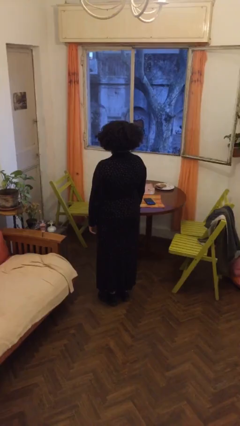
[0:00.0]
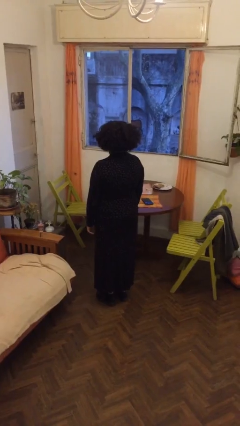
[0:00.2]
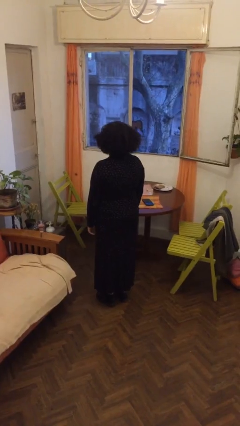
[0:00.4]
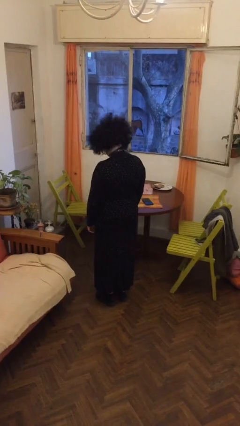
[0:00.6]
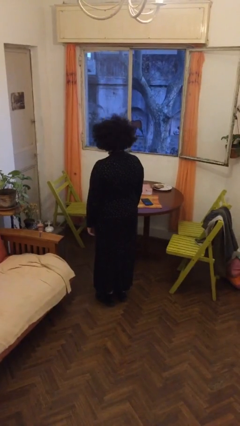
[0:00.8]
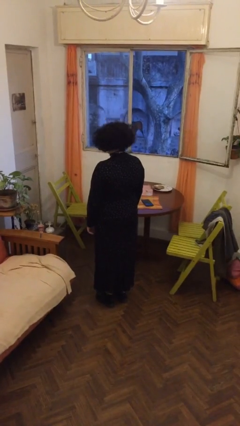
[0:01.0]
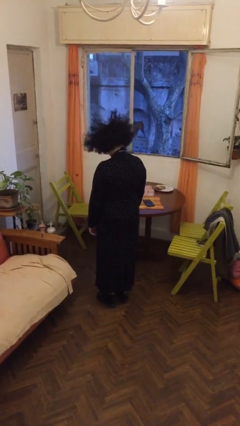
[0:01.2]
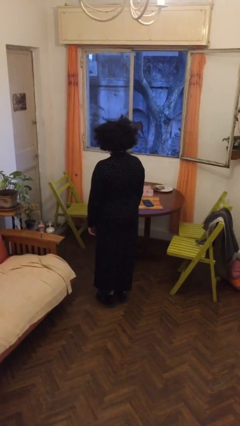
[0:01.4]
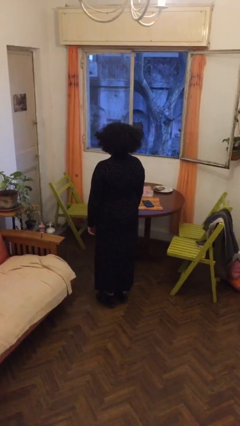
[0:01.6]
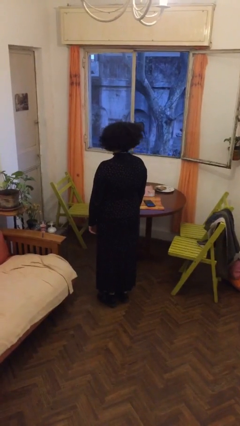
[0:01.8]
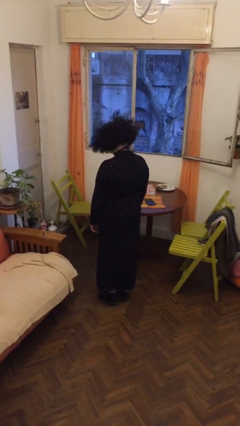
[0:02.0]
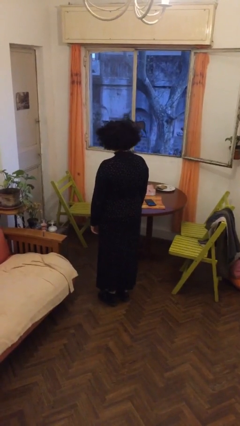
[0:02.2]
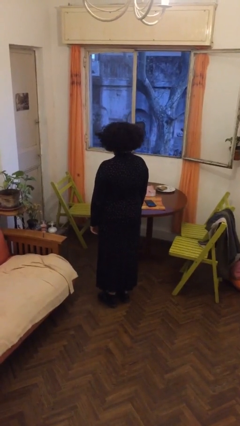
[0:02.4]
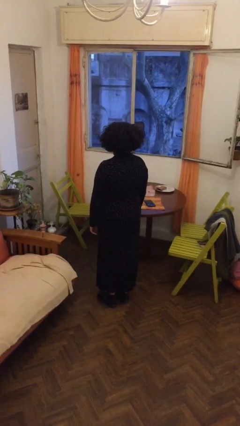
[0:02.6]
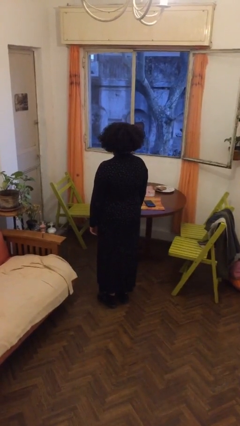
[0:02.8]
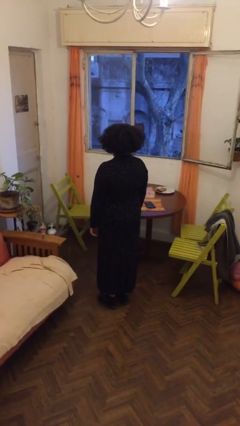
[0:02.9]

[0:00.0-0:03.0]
person nods head

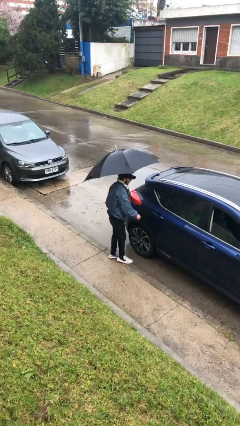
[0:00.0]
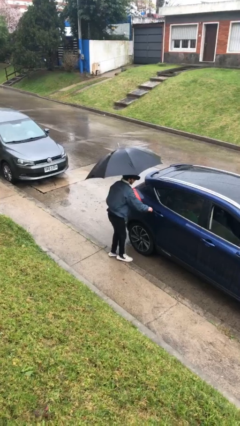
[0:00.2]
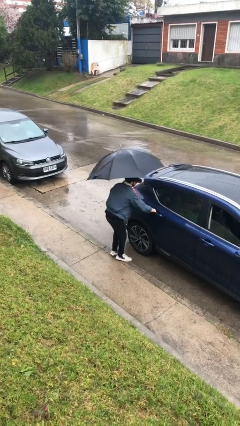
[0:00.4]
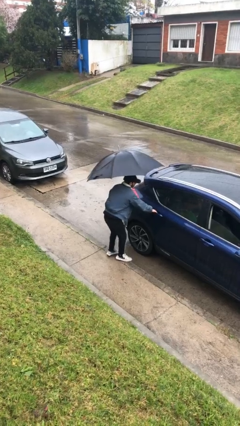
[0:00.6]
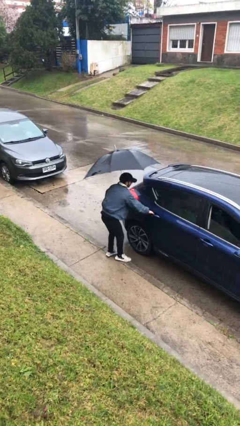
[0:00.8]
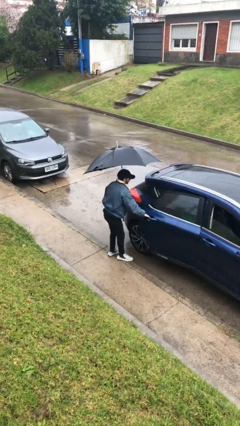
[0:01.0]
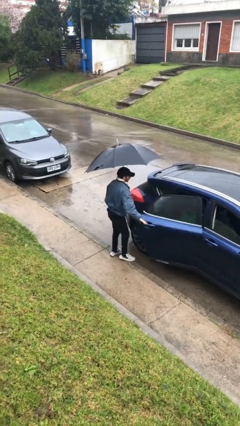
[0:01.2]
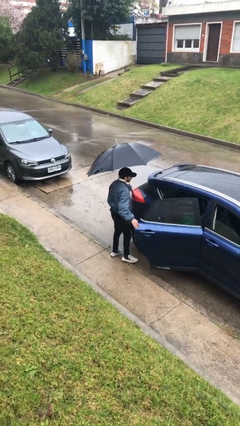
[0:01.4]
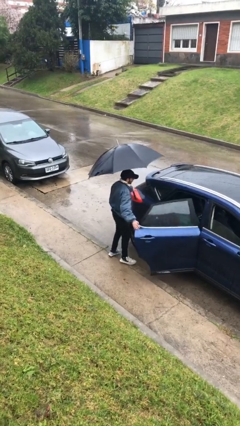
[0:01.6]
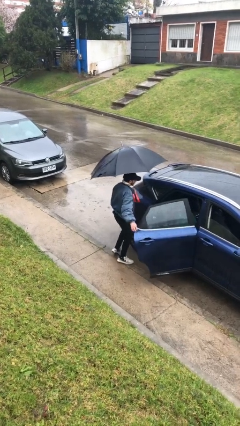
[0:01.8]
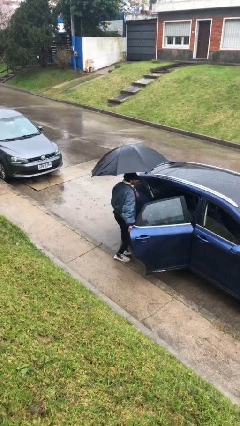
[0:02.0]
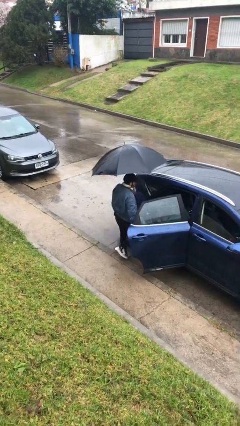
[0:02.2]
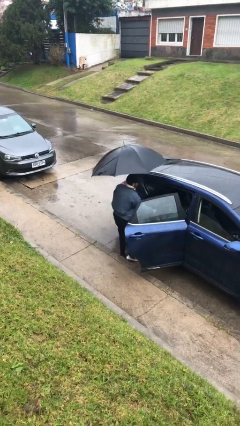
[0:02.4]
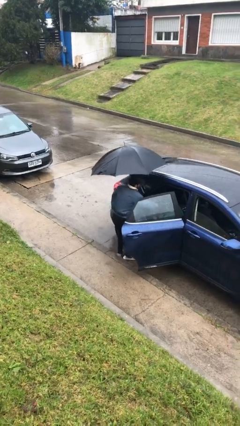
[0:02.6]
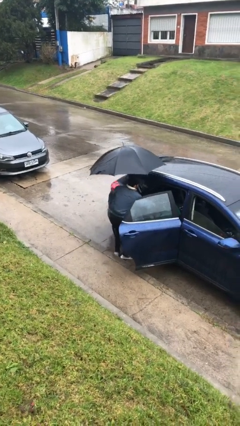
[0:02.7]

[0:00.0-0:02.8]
person opens car door

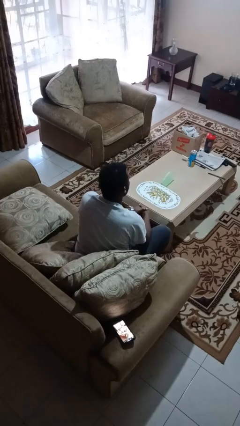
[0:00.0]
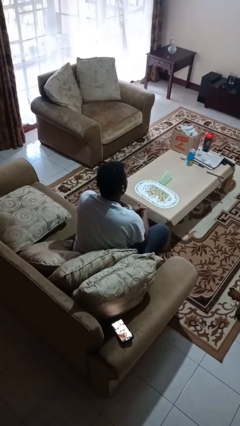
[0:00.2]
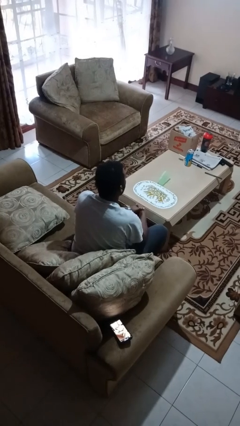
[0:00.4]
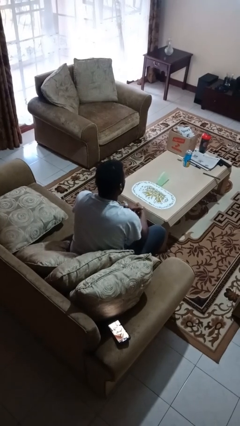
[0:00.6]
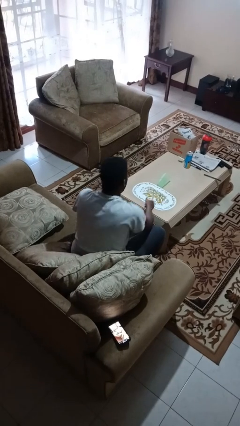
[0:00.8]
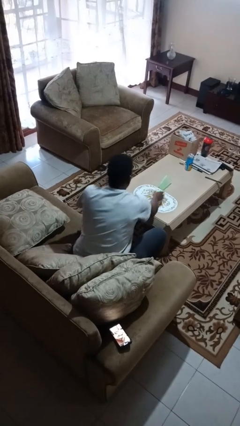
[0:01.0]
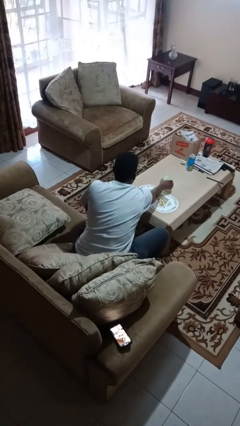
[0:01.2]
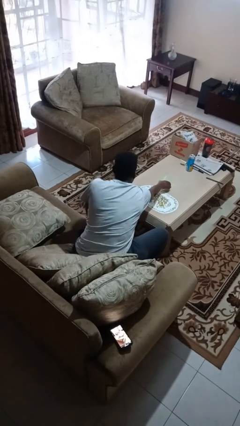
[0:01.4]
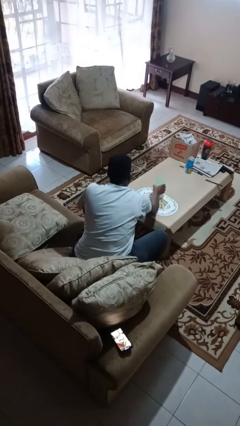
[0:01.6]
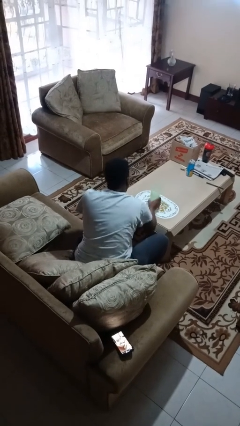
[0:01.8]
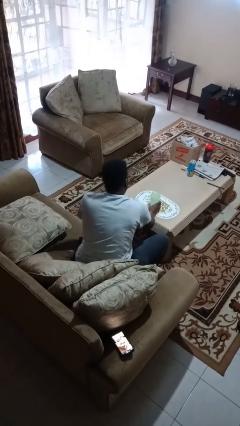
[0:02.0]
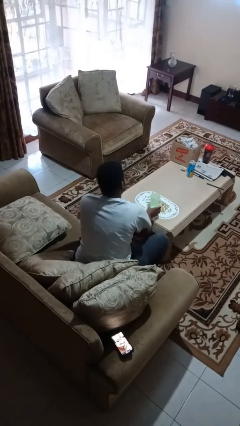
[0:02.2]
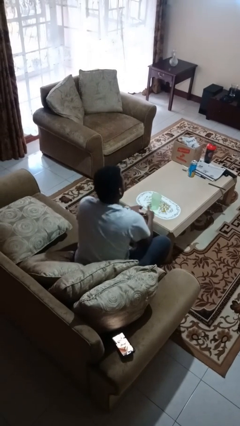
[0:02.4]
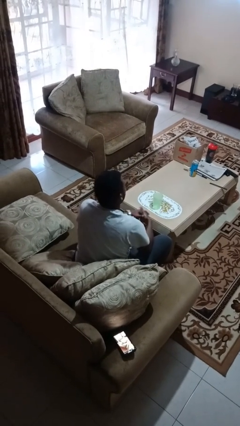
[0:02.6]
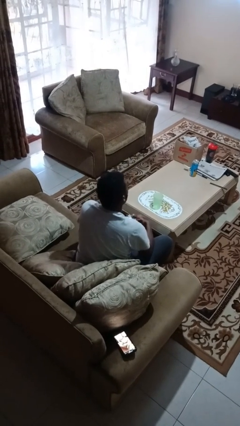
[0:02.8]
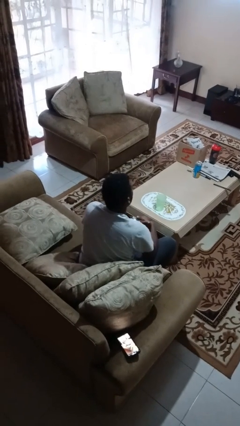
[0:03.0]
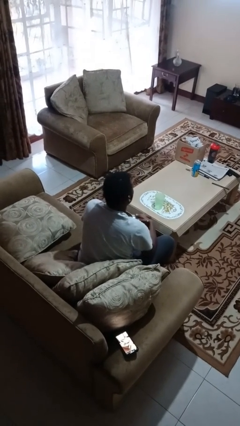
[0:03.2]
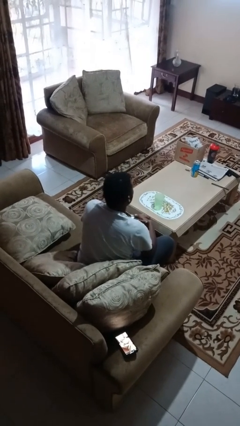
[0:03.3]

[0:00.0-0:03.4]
person sets upright glass

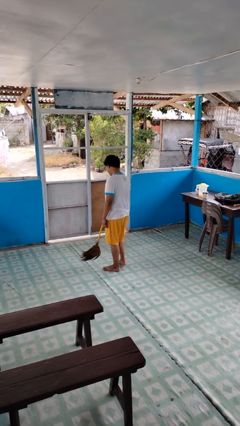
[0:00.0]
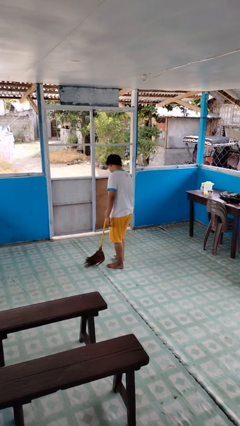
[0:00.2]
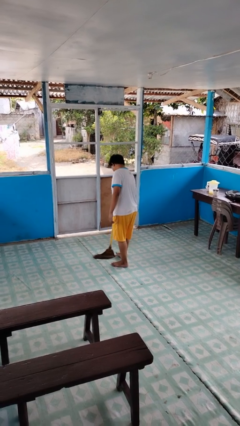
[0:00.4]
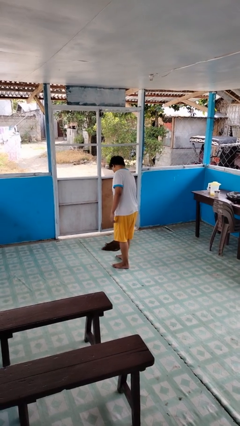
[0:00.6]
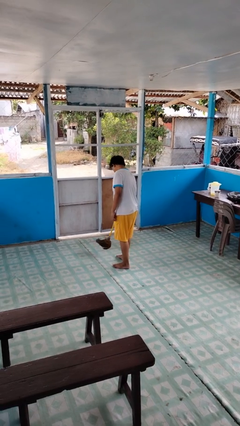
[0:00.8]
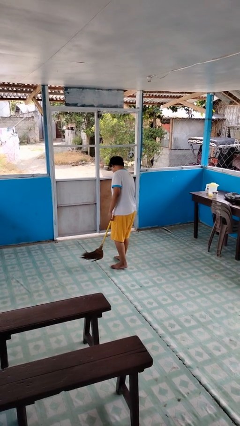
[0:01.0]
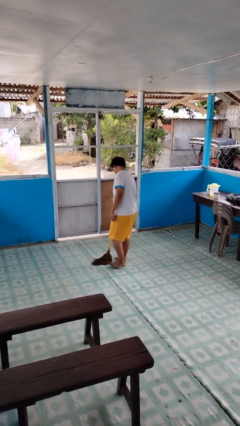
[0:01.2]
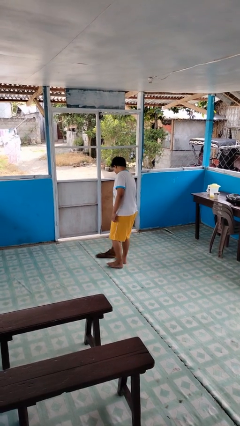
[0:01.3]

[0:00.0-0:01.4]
person sweeps floor

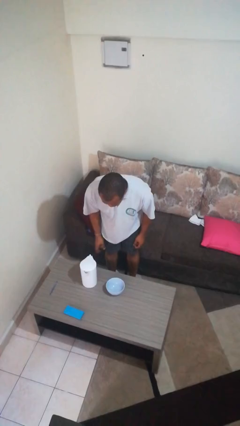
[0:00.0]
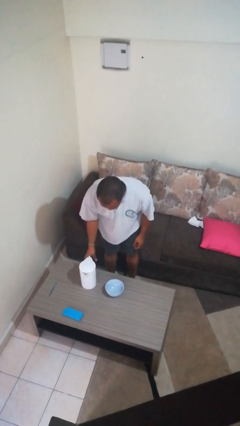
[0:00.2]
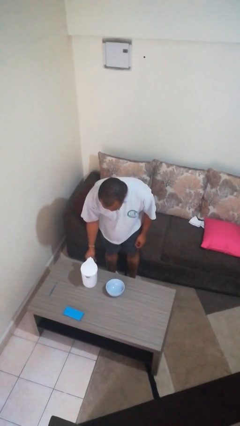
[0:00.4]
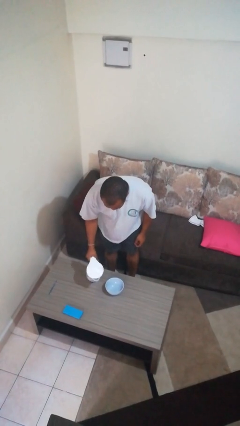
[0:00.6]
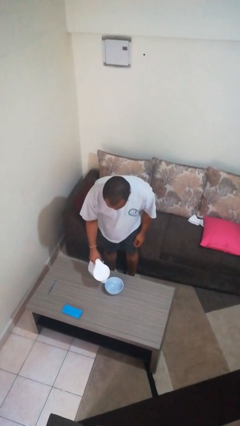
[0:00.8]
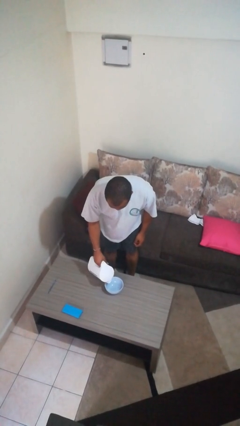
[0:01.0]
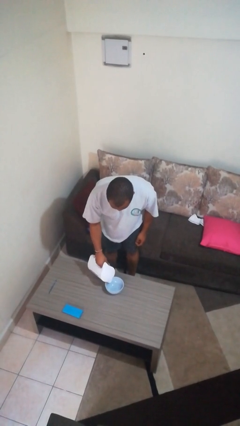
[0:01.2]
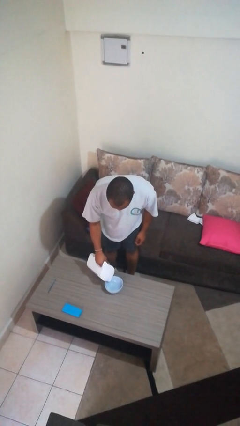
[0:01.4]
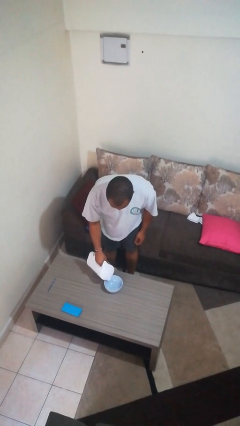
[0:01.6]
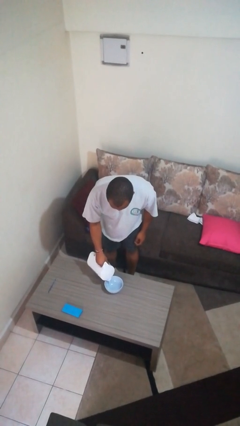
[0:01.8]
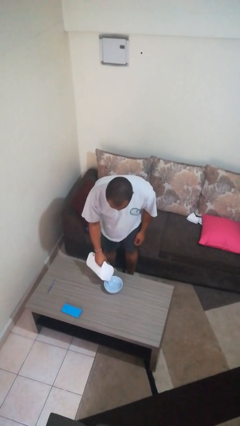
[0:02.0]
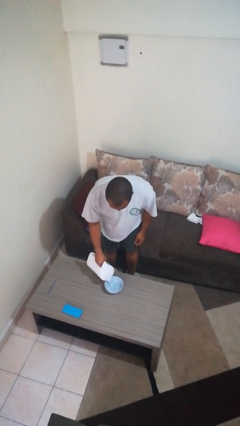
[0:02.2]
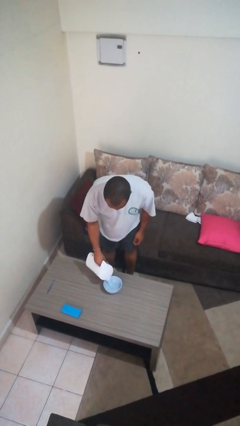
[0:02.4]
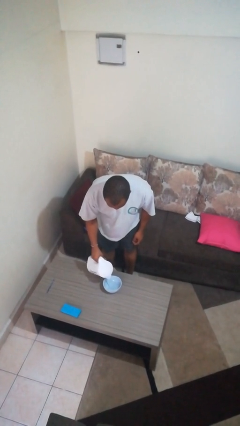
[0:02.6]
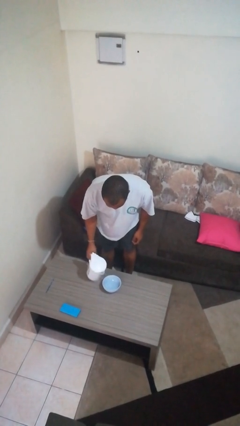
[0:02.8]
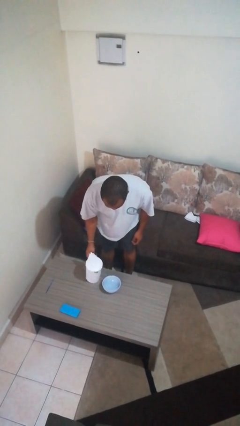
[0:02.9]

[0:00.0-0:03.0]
person pours into bowl

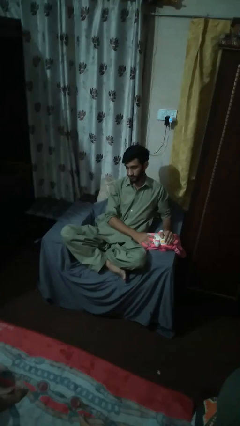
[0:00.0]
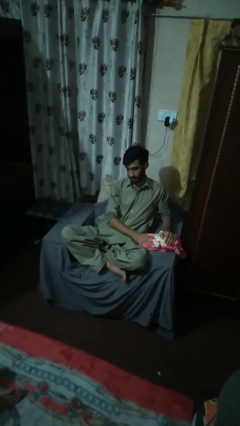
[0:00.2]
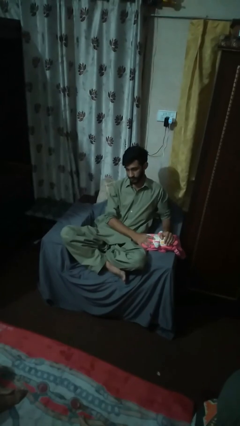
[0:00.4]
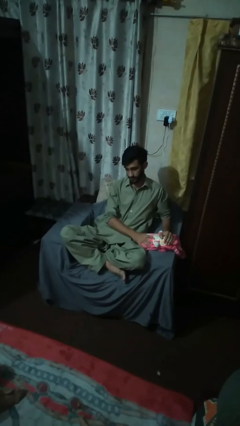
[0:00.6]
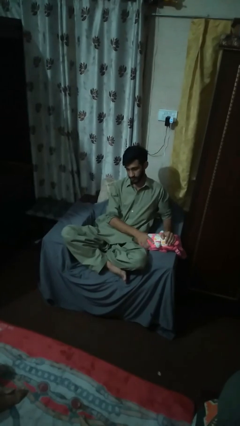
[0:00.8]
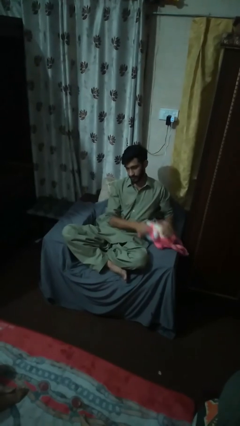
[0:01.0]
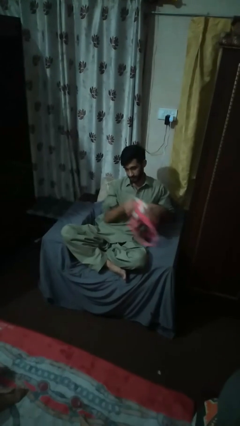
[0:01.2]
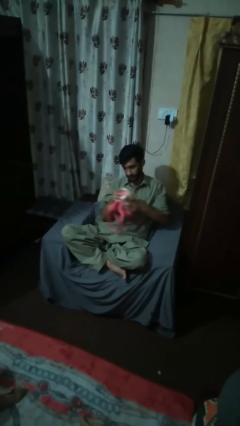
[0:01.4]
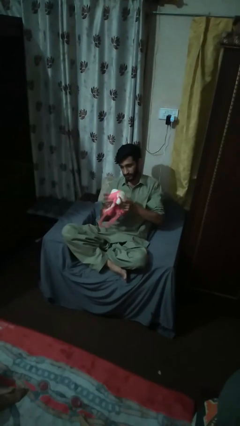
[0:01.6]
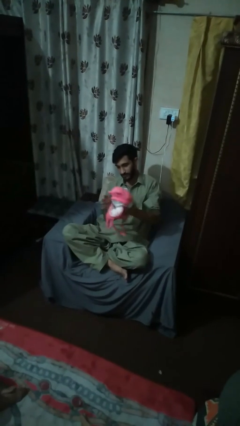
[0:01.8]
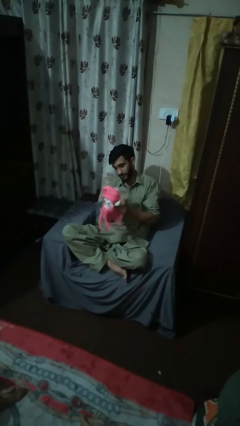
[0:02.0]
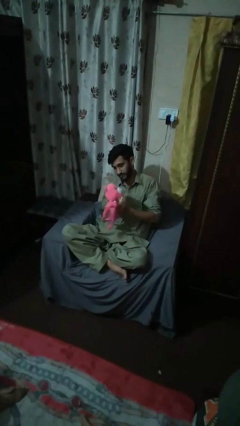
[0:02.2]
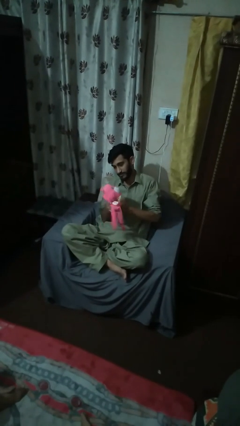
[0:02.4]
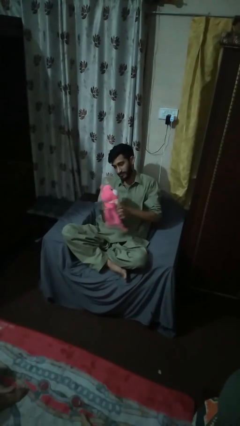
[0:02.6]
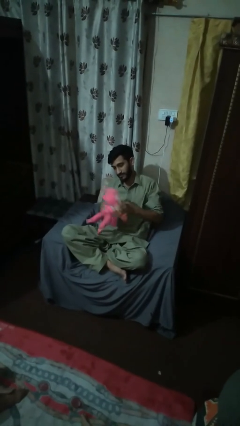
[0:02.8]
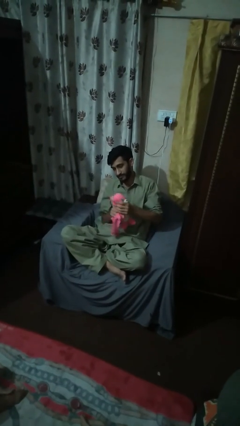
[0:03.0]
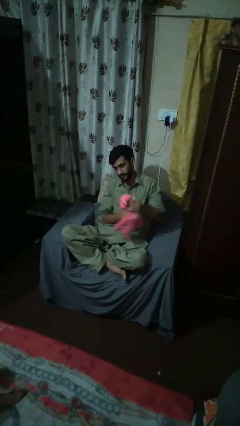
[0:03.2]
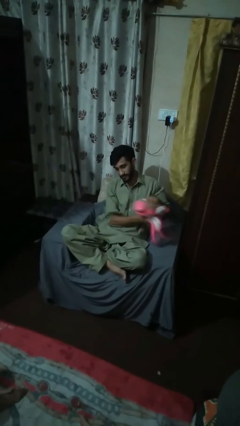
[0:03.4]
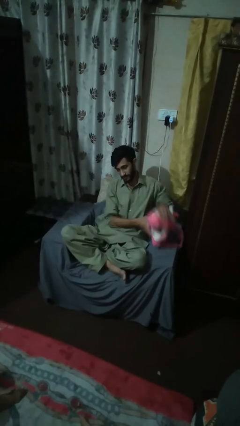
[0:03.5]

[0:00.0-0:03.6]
person squeezes object

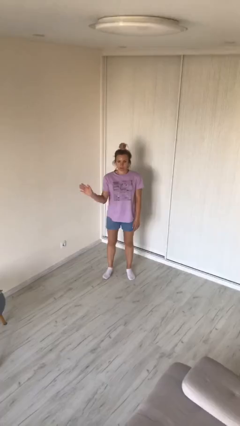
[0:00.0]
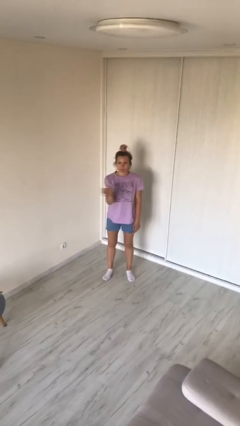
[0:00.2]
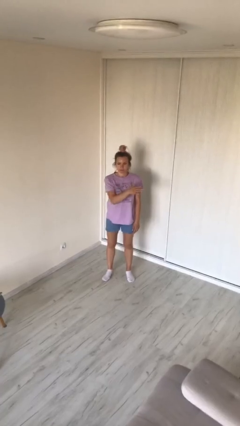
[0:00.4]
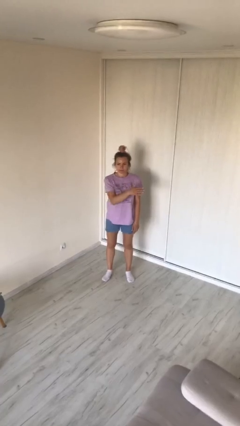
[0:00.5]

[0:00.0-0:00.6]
person gestures swipe left
